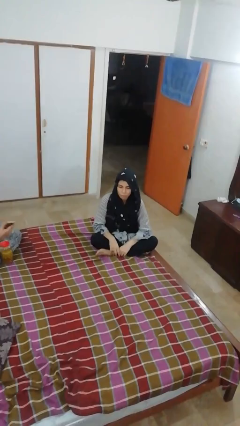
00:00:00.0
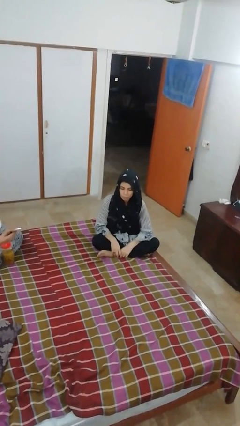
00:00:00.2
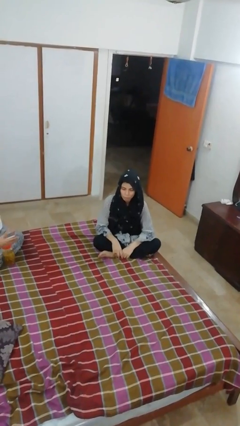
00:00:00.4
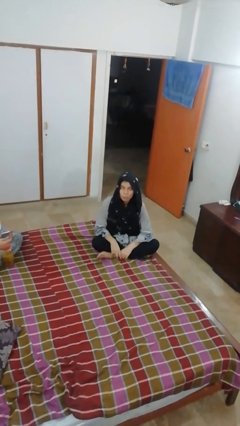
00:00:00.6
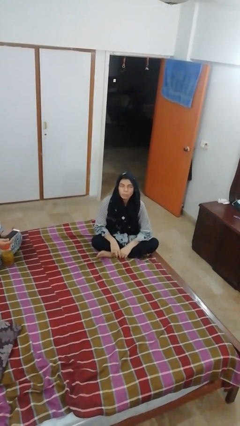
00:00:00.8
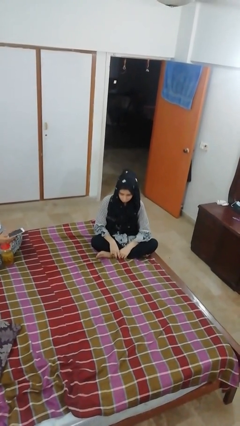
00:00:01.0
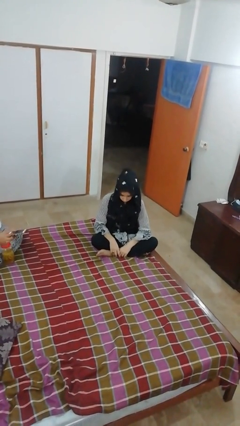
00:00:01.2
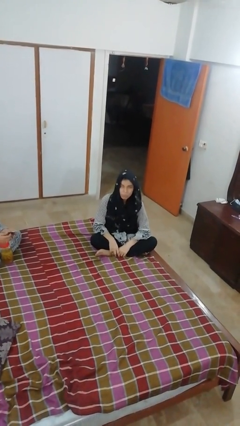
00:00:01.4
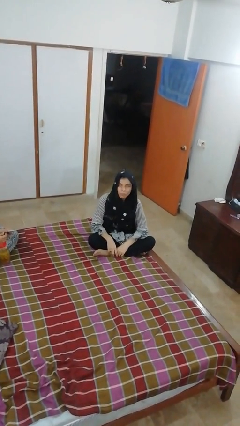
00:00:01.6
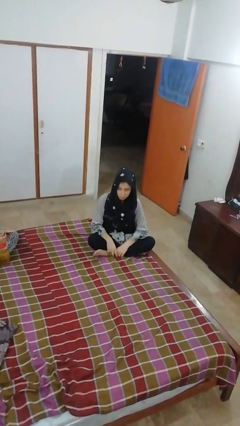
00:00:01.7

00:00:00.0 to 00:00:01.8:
person nods head

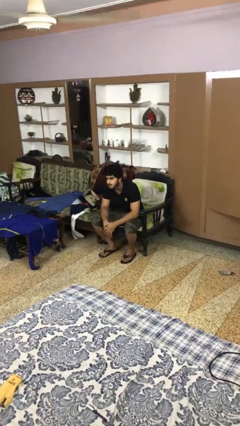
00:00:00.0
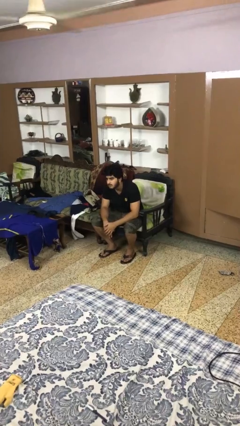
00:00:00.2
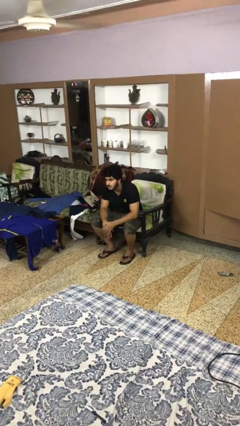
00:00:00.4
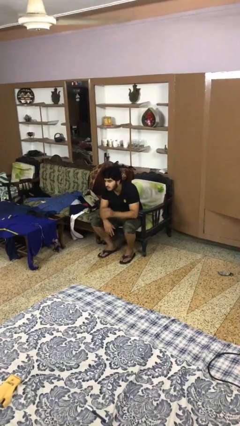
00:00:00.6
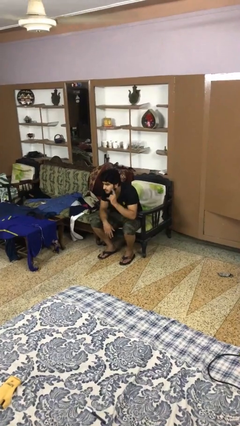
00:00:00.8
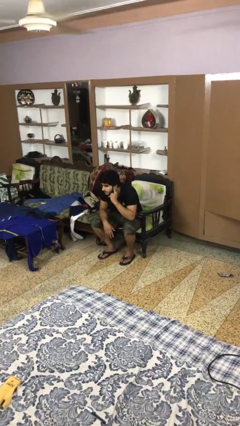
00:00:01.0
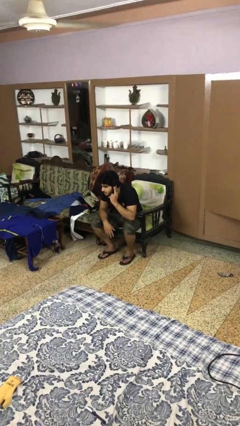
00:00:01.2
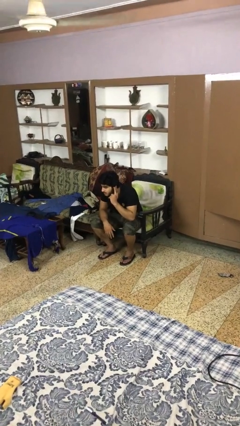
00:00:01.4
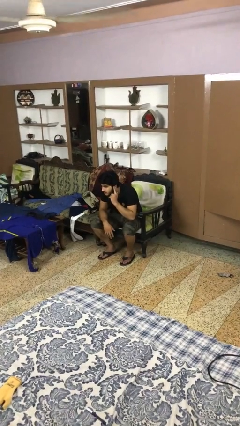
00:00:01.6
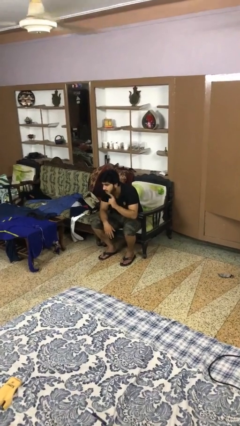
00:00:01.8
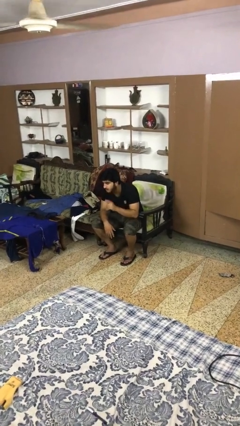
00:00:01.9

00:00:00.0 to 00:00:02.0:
person gestures listen closely

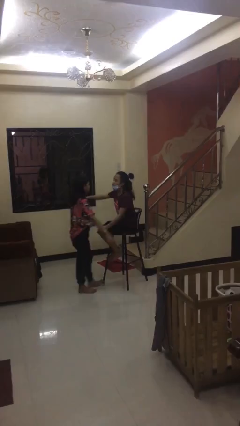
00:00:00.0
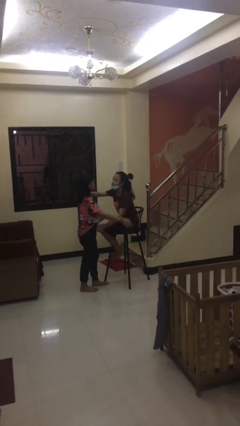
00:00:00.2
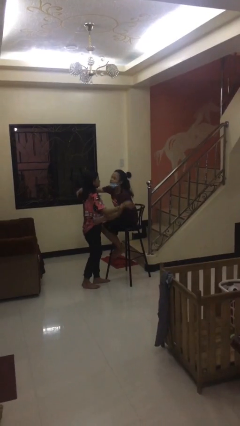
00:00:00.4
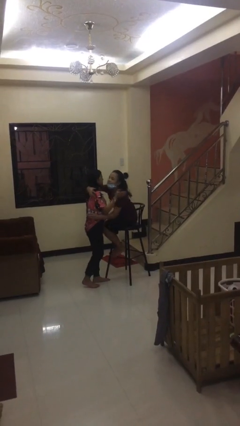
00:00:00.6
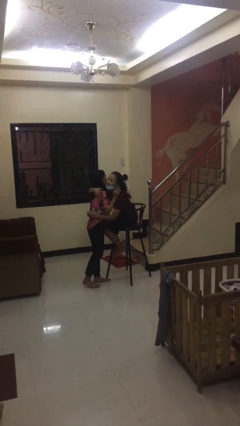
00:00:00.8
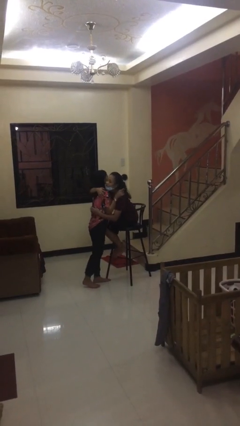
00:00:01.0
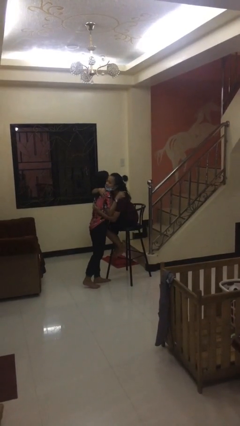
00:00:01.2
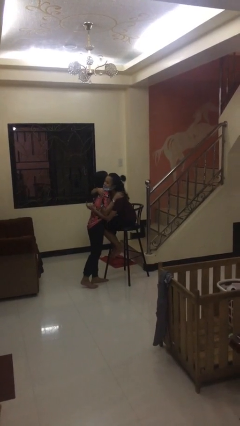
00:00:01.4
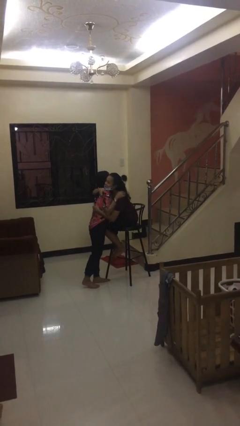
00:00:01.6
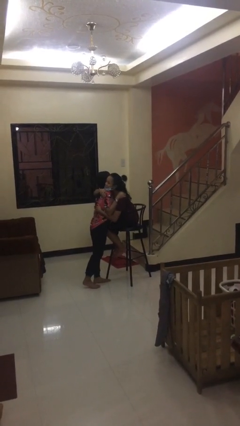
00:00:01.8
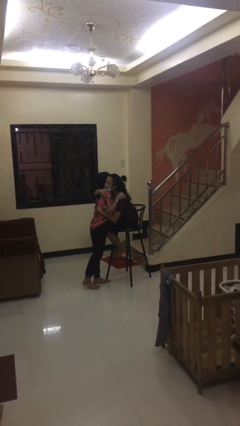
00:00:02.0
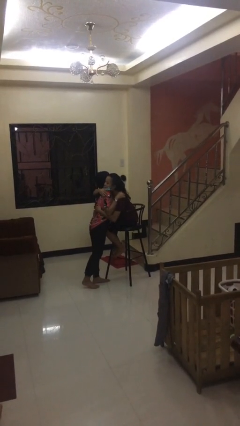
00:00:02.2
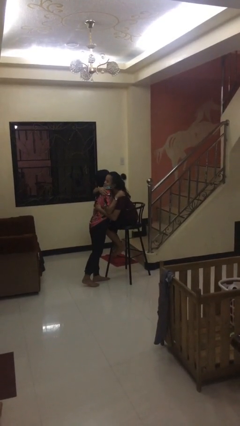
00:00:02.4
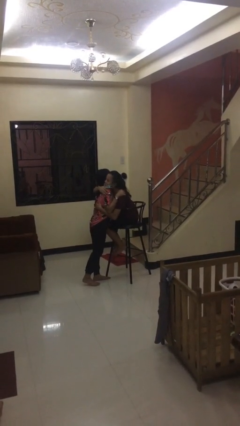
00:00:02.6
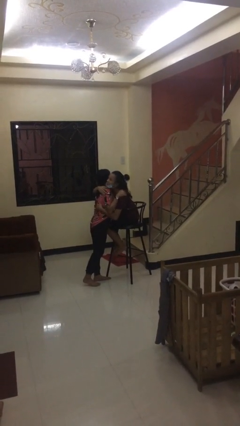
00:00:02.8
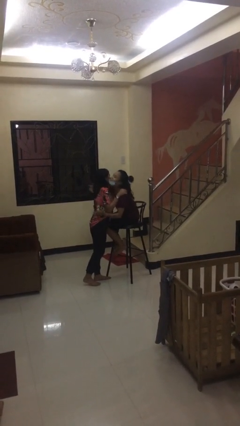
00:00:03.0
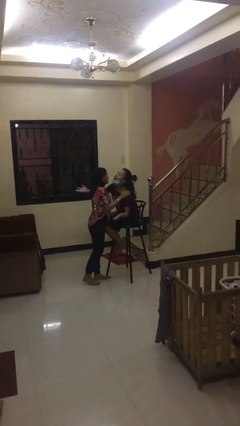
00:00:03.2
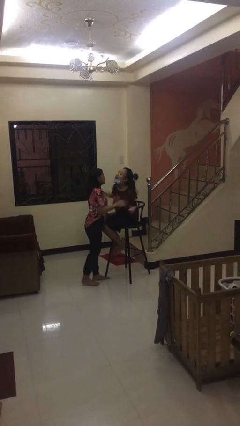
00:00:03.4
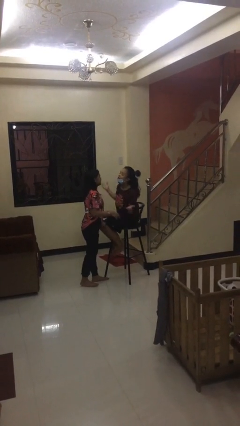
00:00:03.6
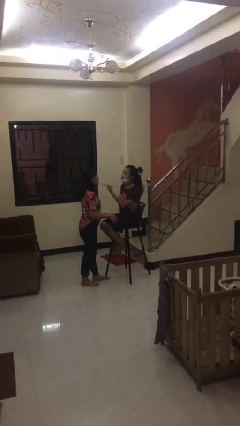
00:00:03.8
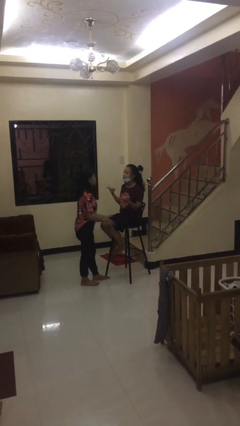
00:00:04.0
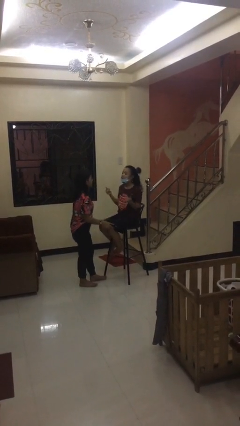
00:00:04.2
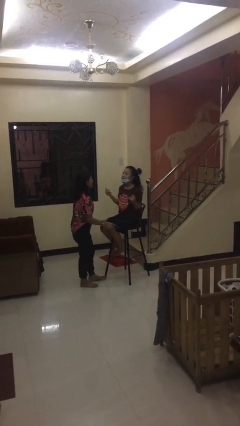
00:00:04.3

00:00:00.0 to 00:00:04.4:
person embraces person

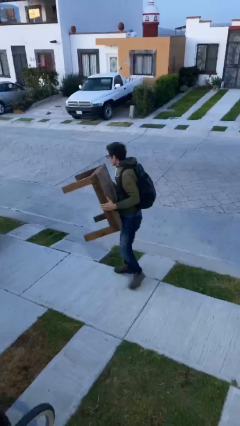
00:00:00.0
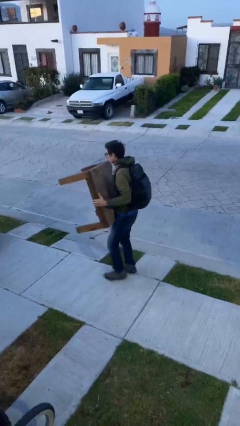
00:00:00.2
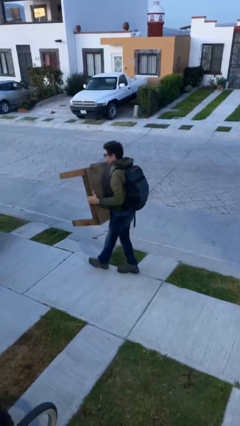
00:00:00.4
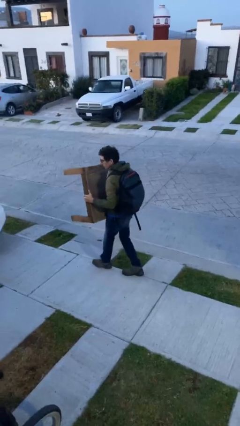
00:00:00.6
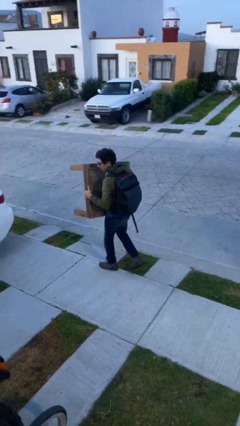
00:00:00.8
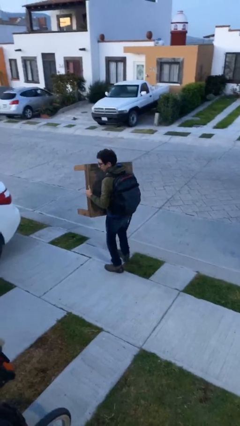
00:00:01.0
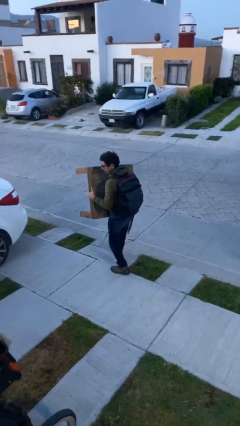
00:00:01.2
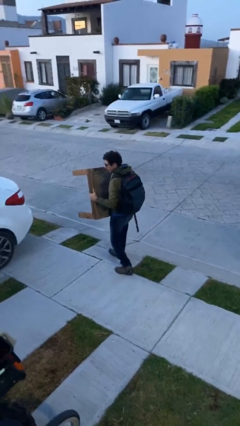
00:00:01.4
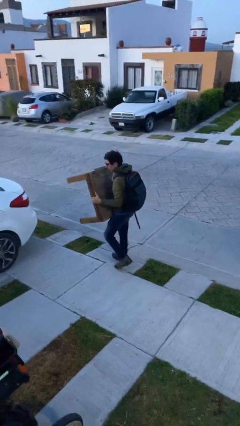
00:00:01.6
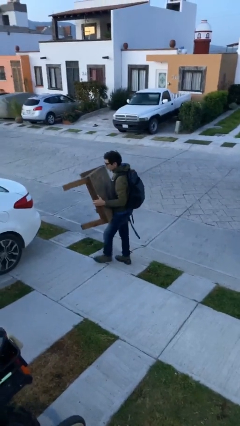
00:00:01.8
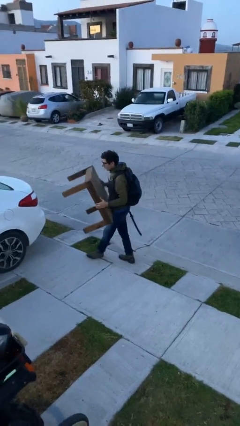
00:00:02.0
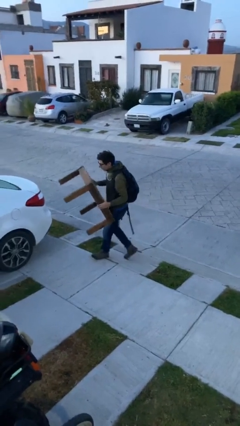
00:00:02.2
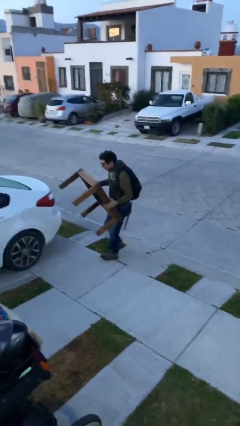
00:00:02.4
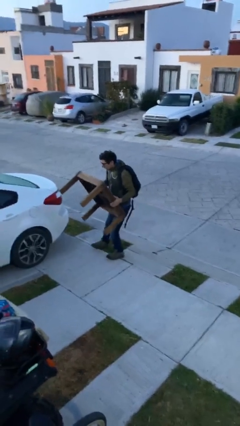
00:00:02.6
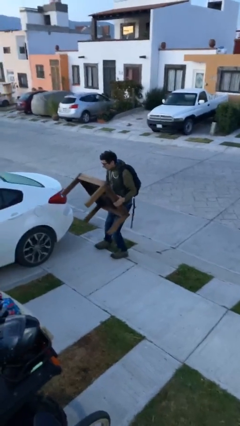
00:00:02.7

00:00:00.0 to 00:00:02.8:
person carries heavy object

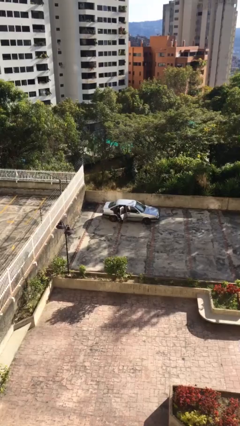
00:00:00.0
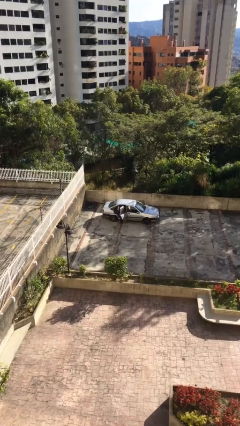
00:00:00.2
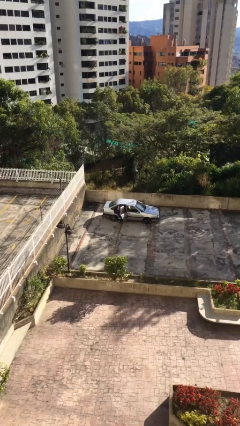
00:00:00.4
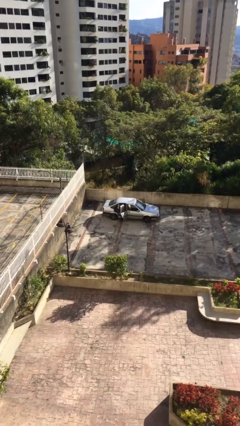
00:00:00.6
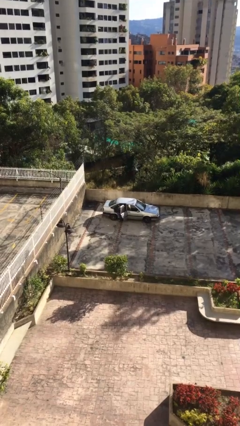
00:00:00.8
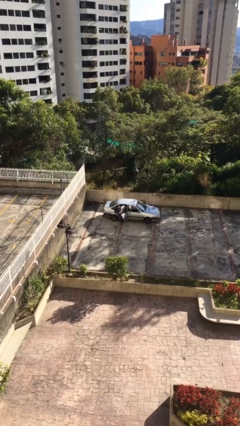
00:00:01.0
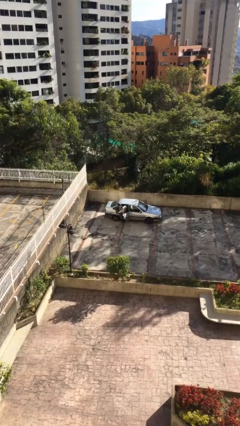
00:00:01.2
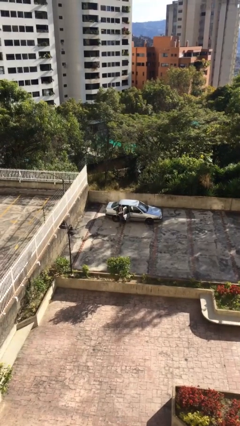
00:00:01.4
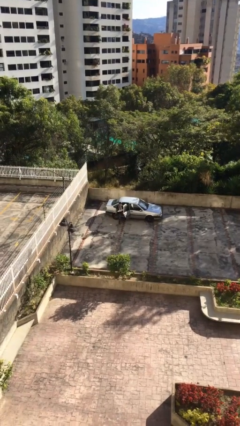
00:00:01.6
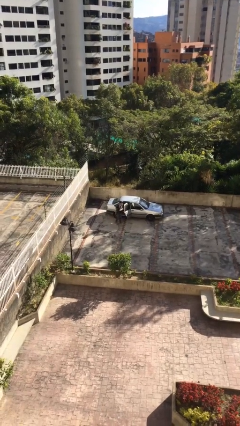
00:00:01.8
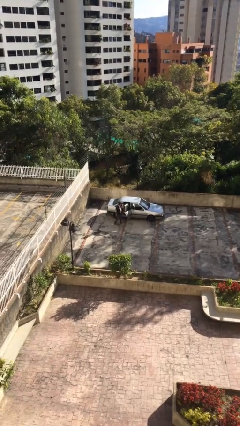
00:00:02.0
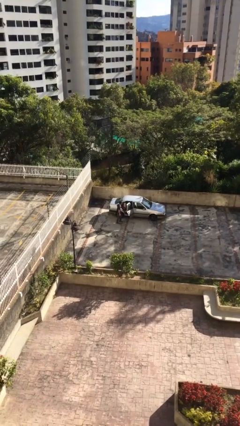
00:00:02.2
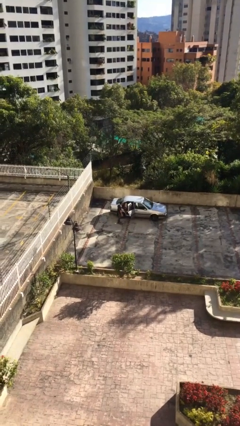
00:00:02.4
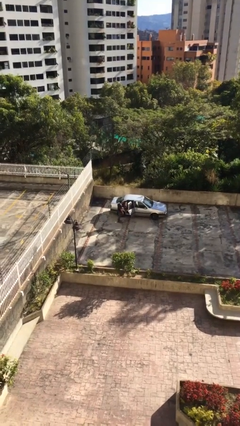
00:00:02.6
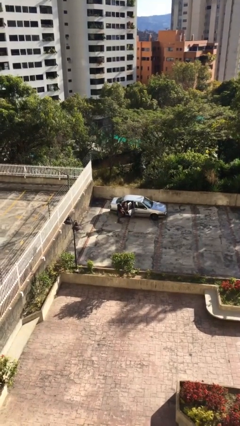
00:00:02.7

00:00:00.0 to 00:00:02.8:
person exits car

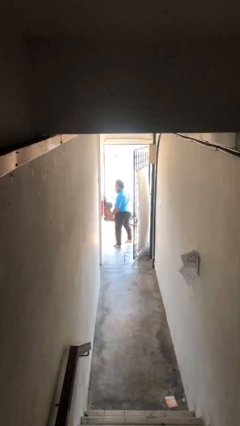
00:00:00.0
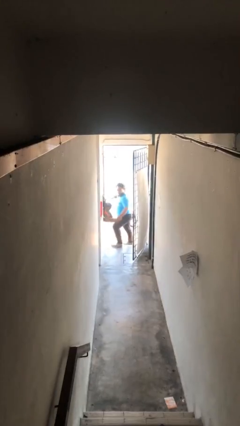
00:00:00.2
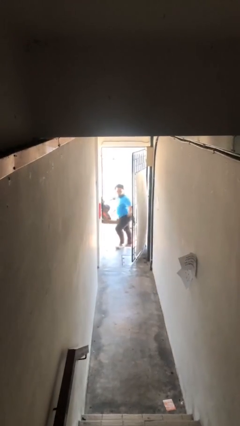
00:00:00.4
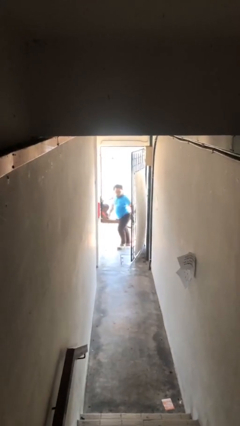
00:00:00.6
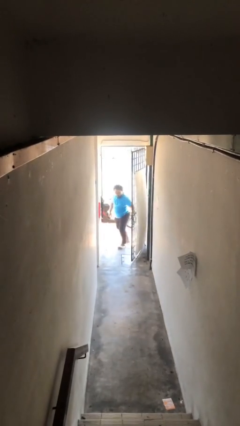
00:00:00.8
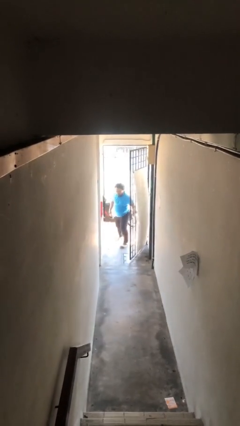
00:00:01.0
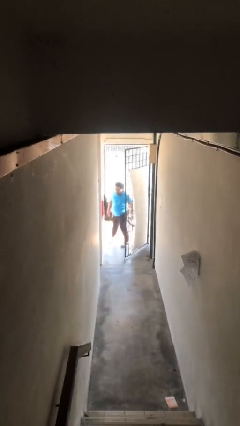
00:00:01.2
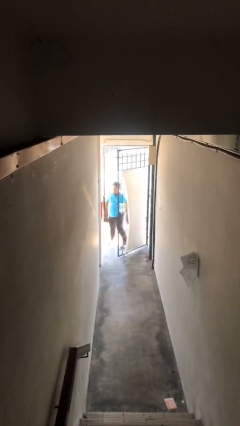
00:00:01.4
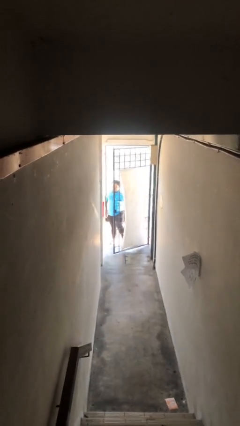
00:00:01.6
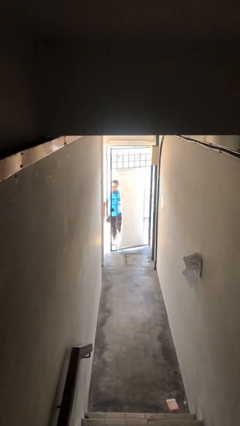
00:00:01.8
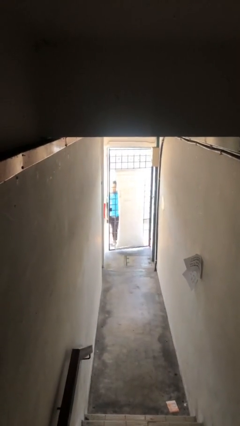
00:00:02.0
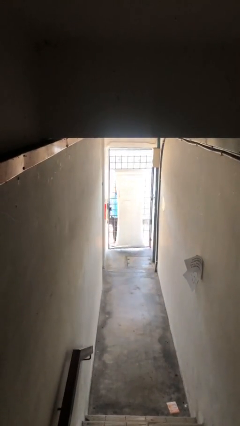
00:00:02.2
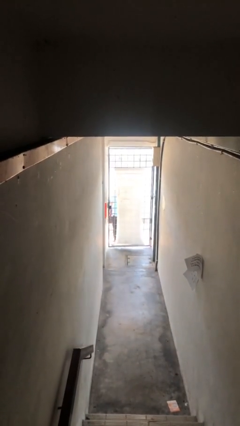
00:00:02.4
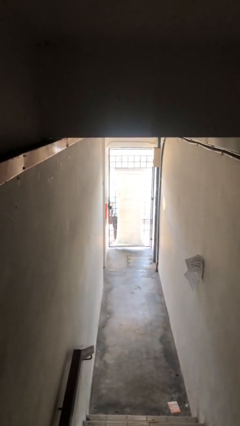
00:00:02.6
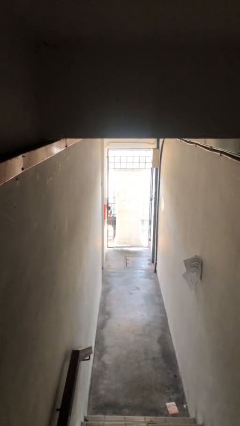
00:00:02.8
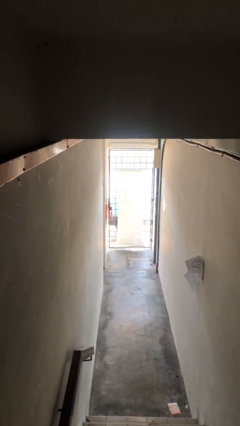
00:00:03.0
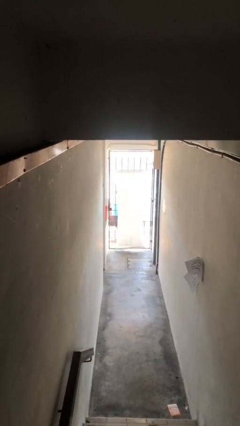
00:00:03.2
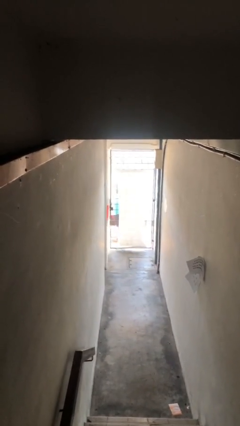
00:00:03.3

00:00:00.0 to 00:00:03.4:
person closes facility door
